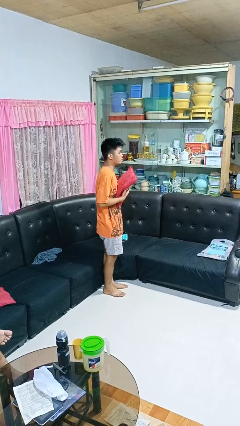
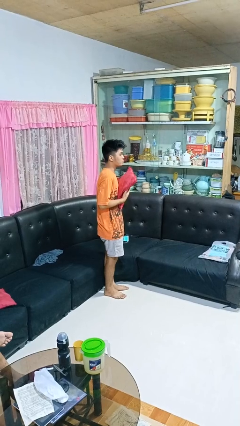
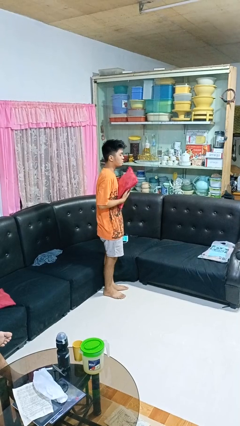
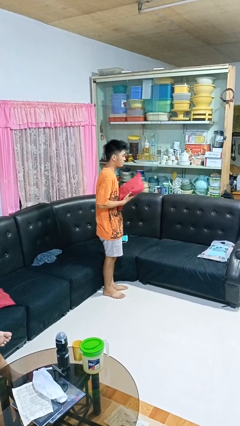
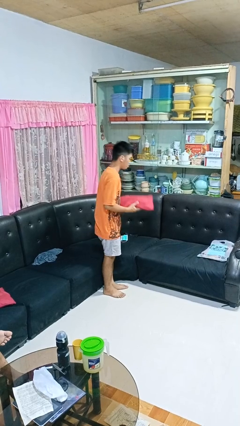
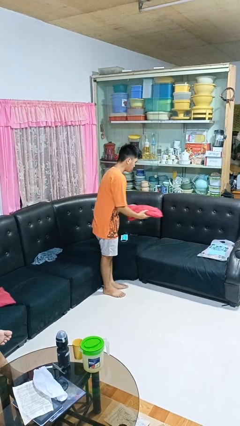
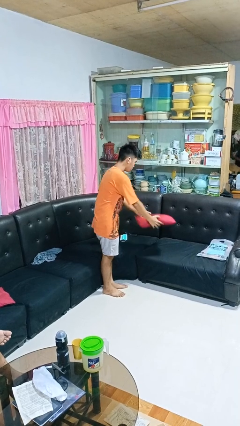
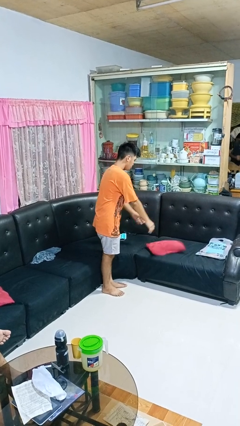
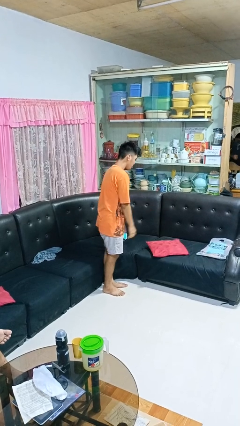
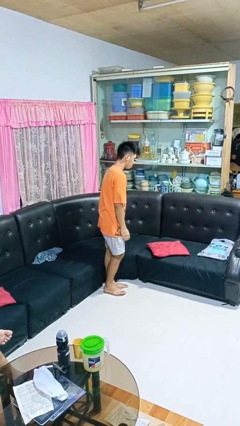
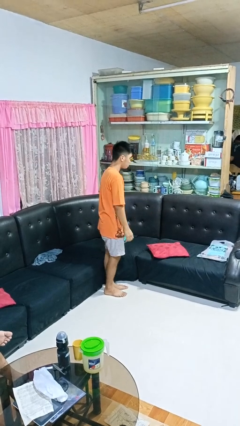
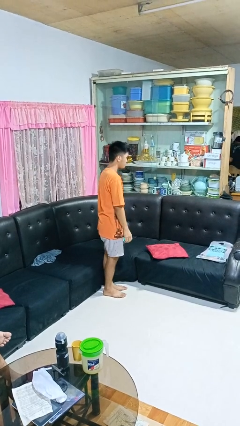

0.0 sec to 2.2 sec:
person puts down object on couch

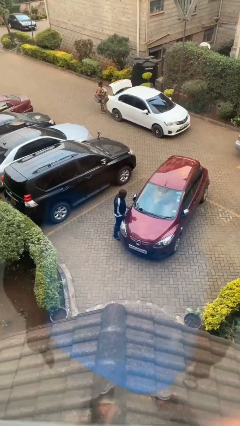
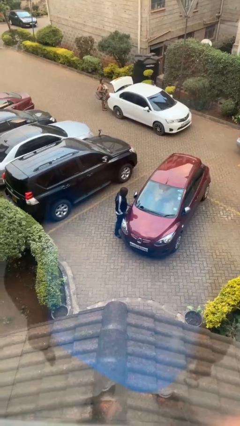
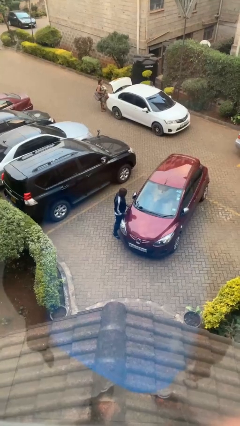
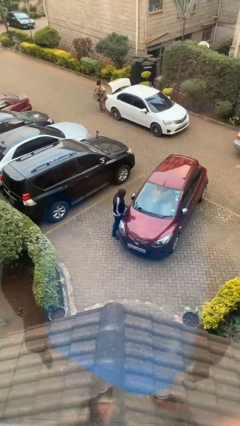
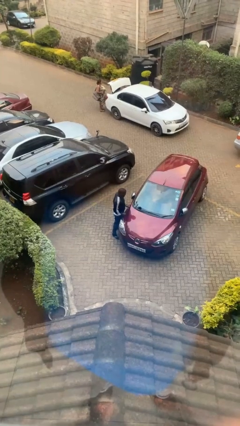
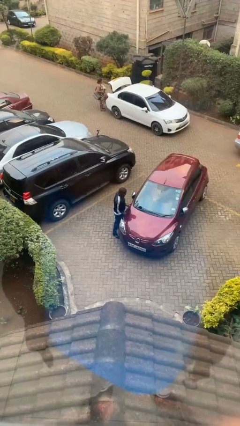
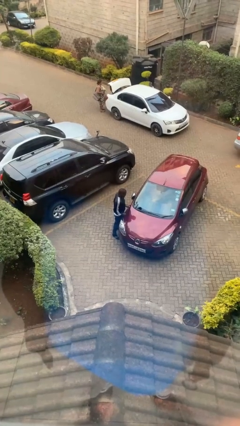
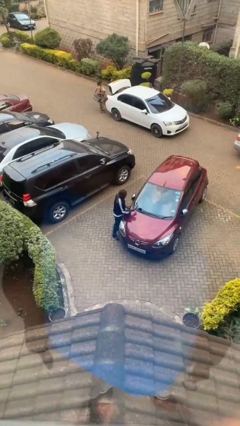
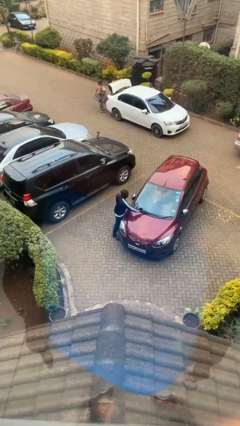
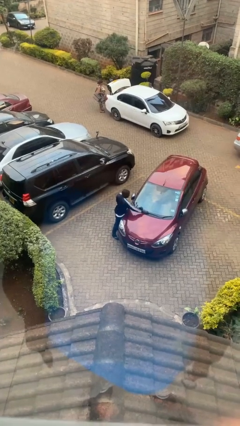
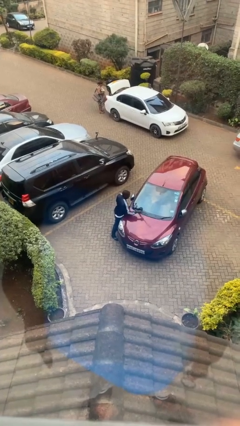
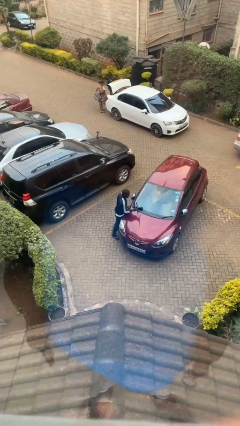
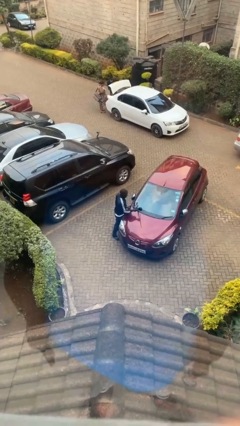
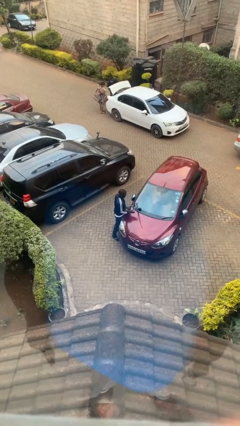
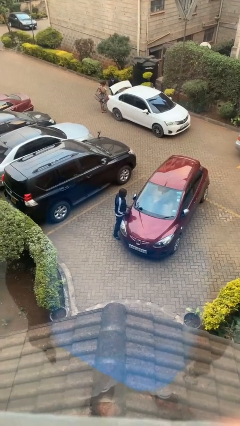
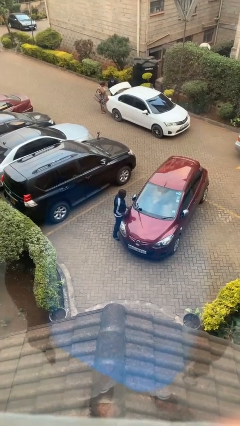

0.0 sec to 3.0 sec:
person flips up car wipers

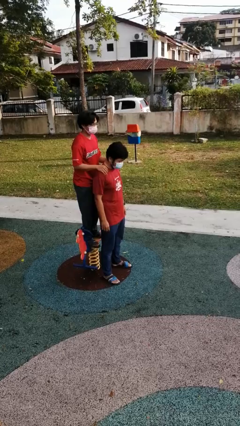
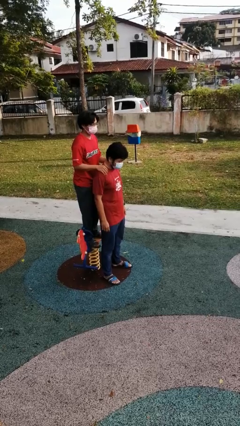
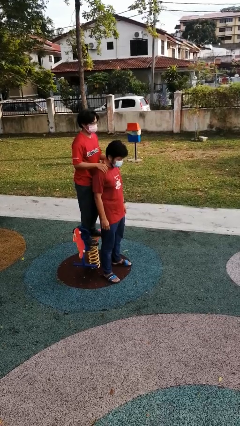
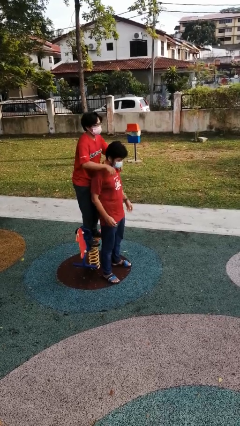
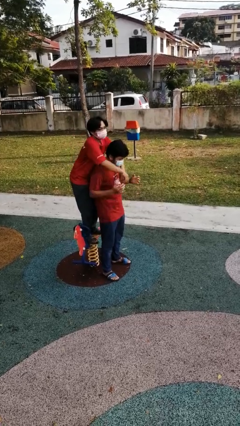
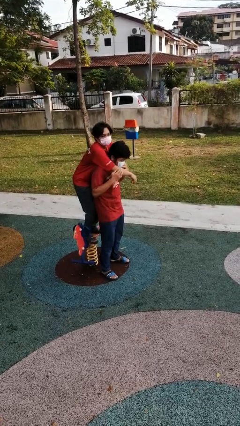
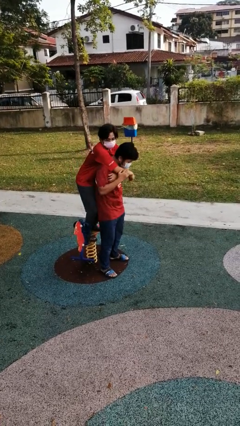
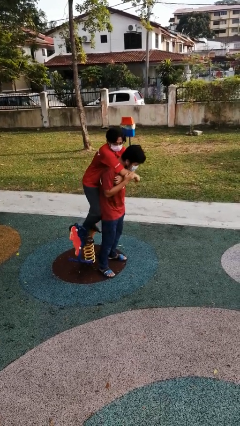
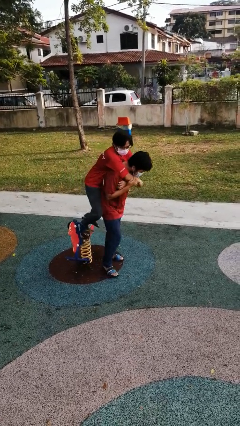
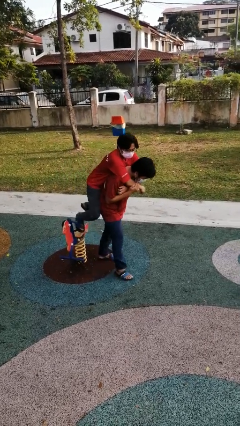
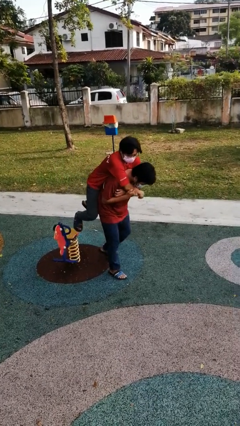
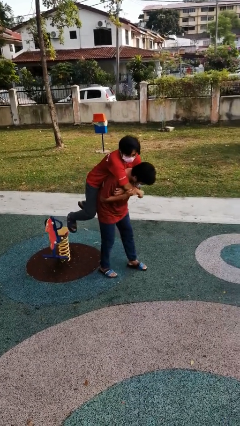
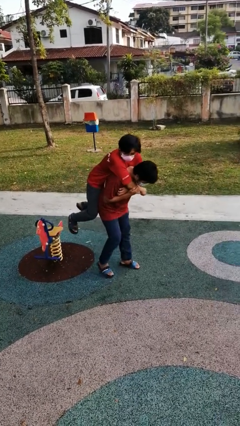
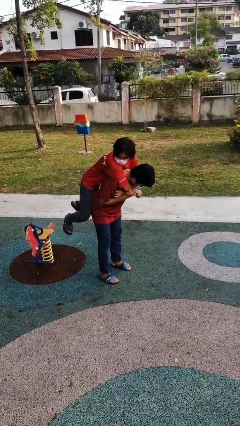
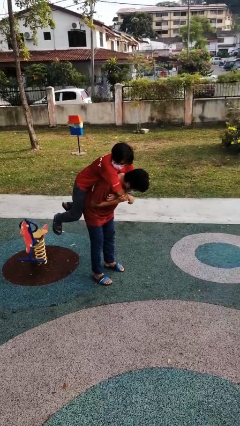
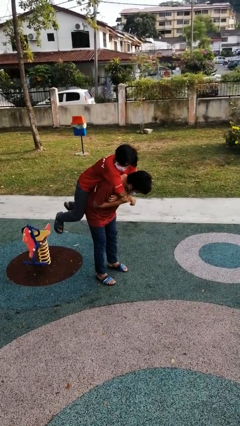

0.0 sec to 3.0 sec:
person carries person over shoulder

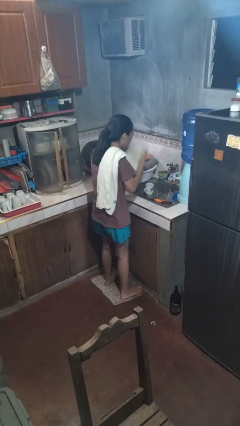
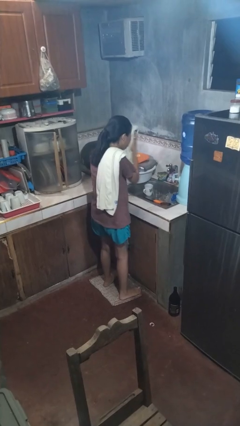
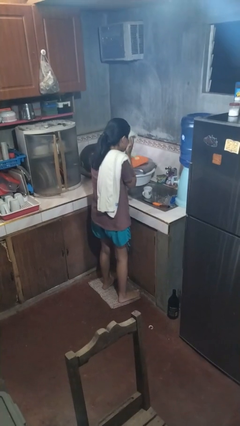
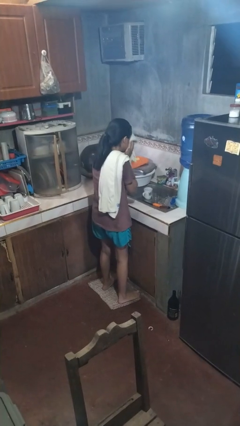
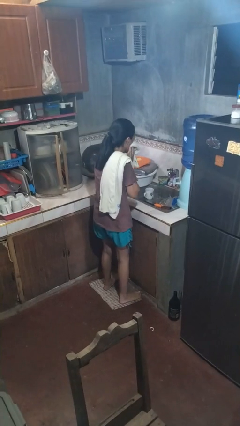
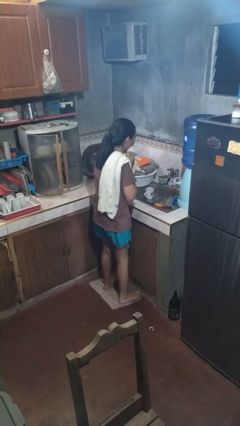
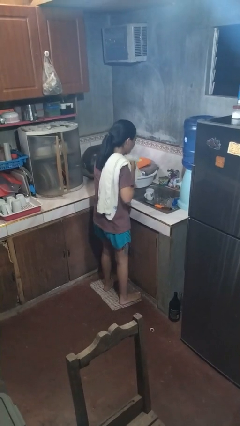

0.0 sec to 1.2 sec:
person dries face with towel

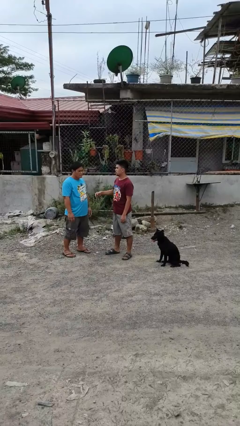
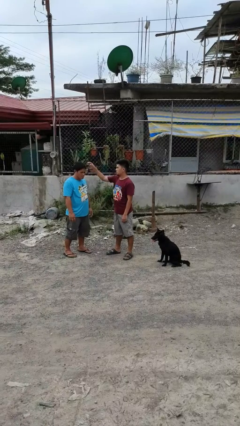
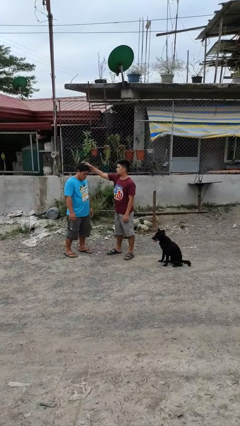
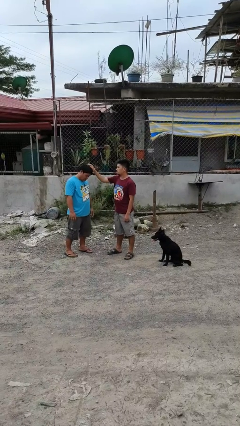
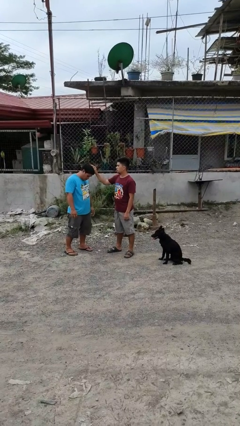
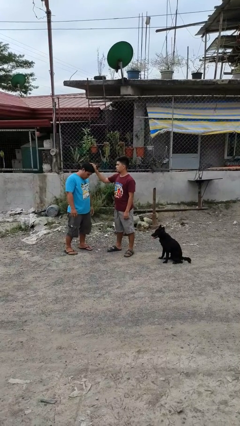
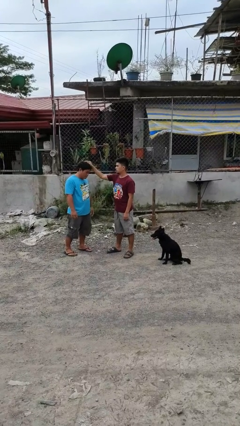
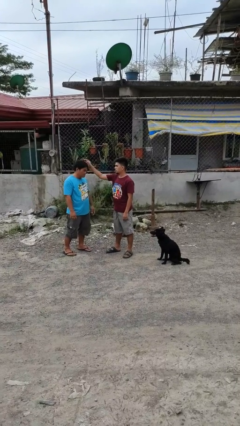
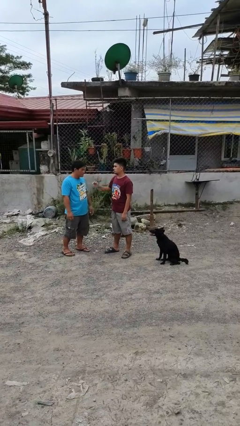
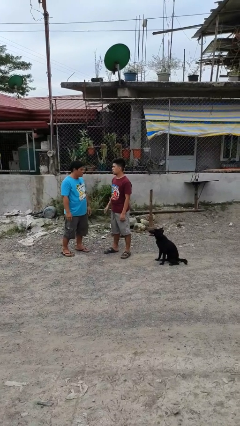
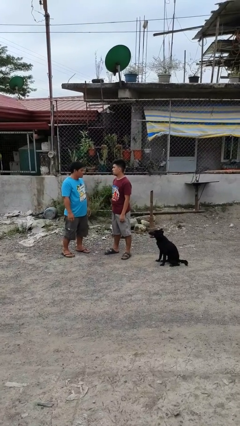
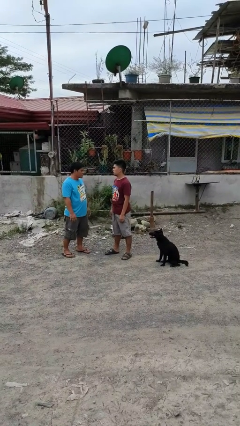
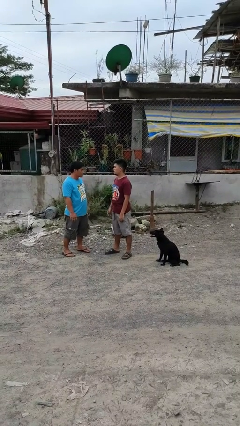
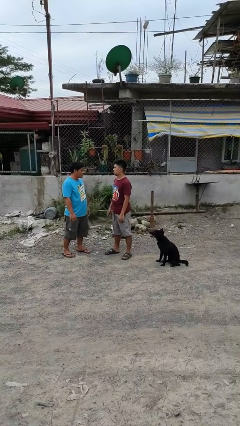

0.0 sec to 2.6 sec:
person grabs person by hair

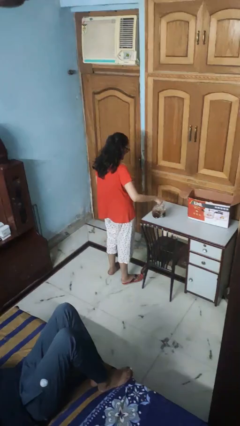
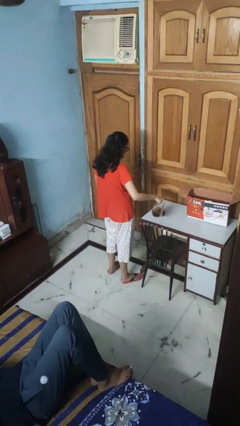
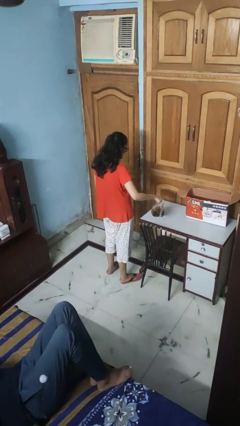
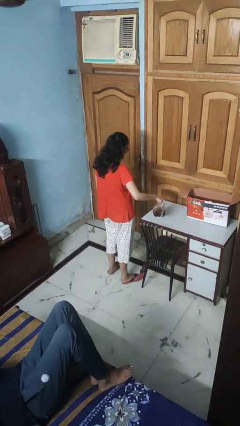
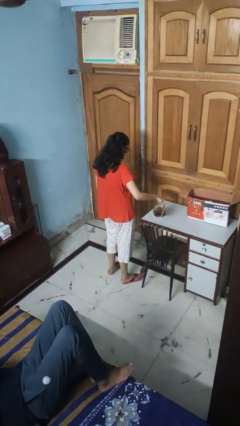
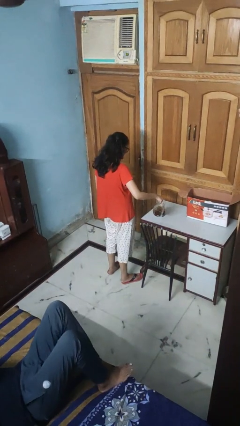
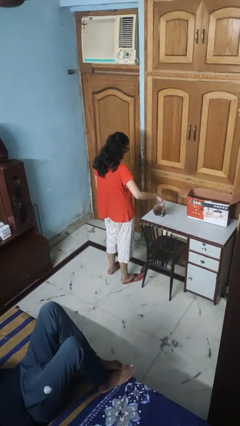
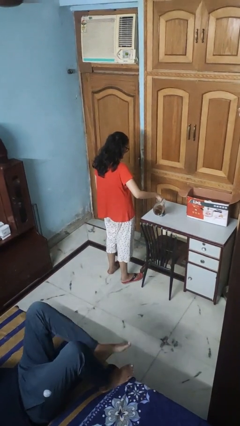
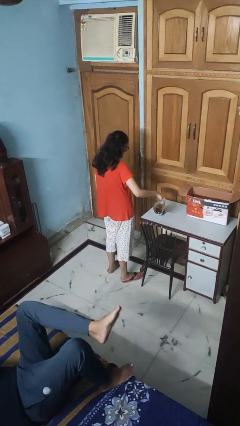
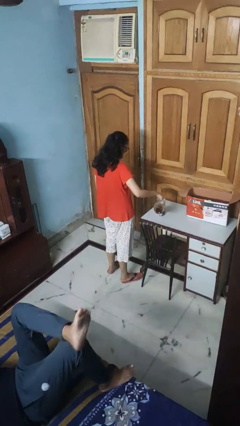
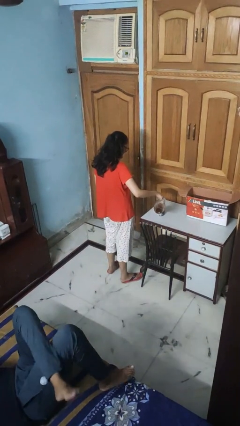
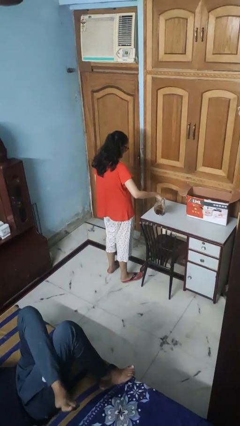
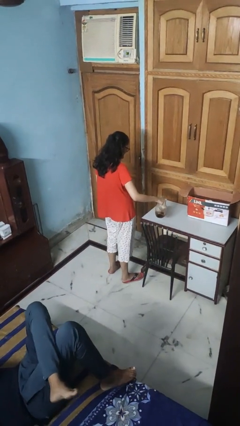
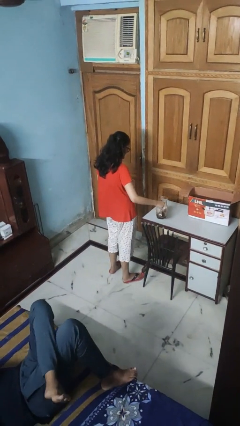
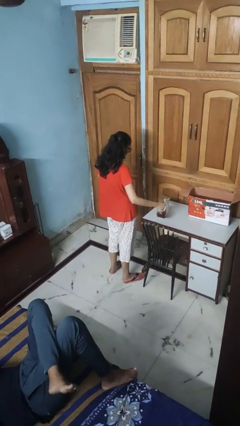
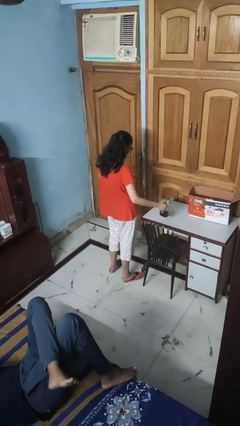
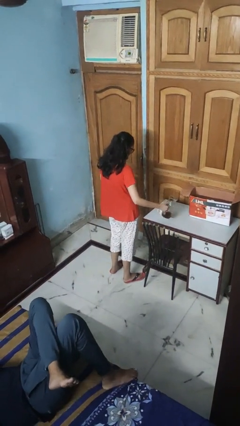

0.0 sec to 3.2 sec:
person pours coffee into mug

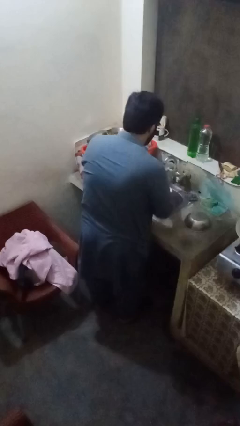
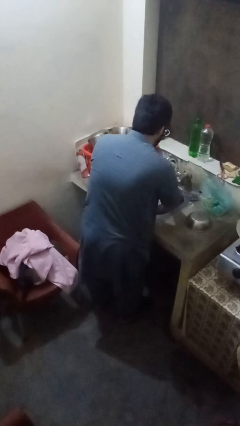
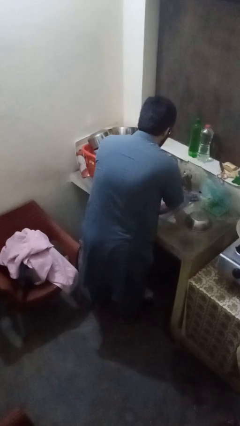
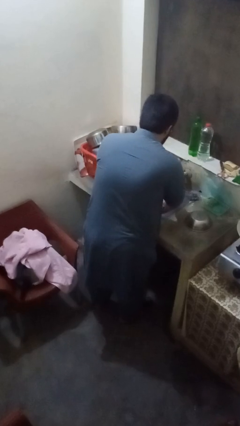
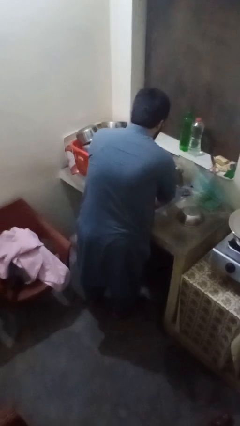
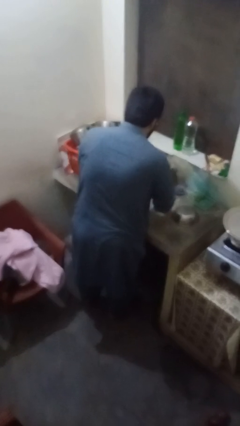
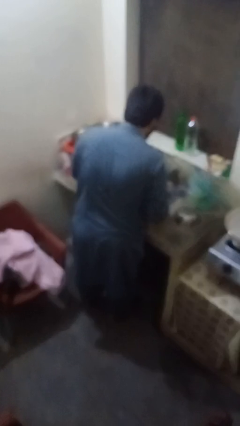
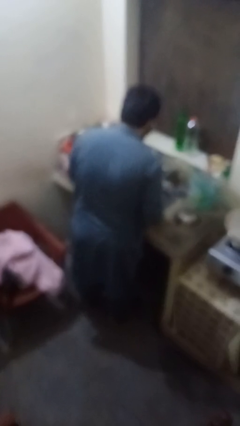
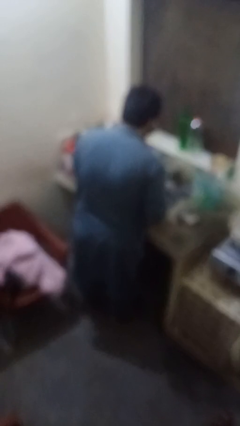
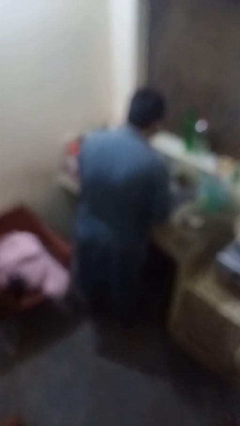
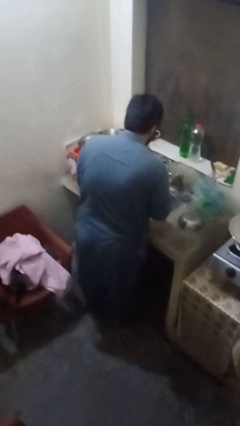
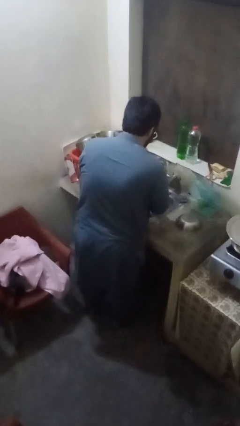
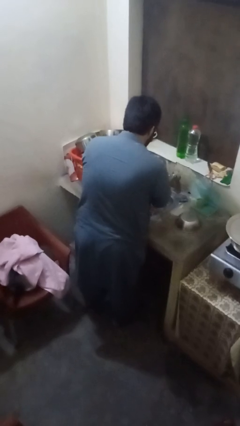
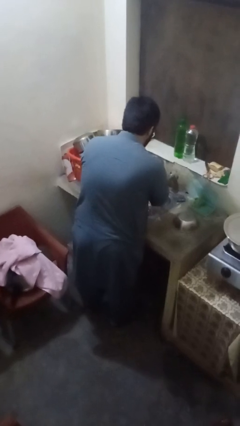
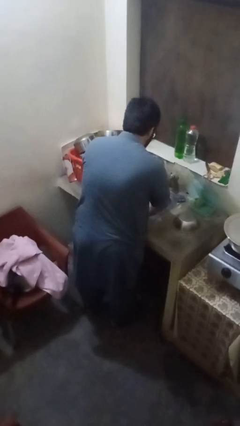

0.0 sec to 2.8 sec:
person washes dish
